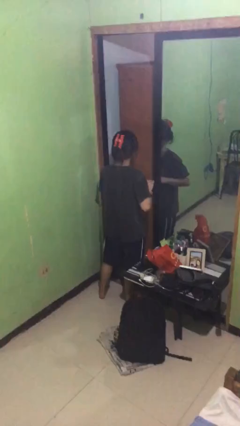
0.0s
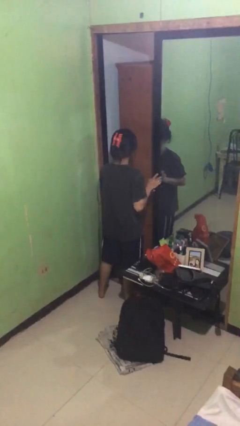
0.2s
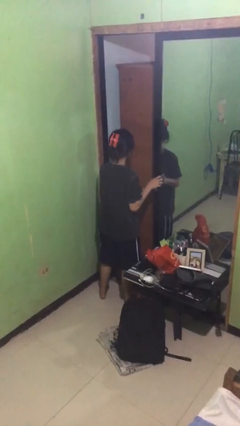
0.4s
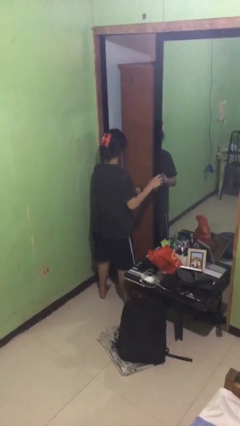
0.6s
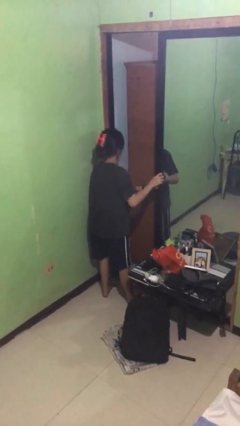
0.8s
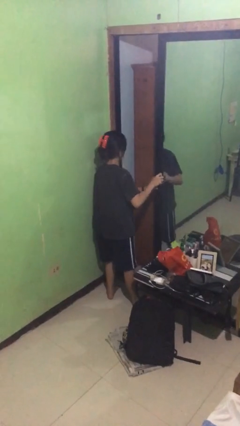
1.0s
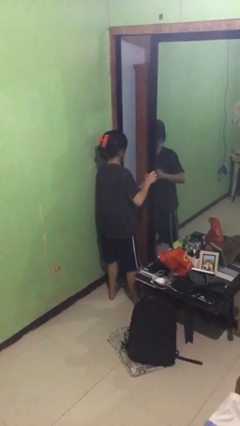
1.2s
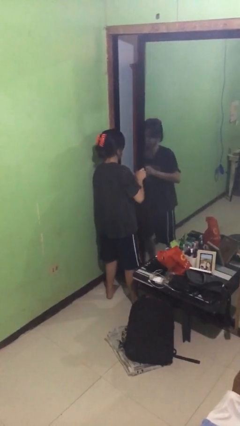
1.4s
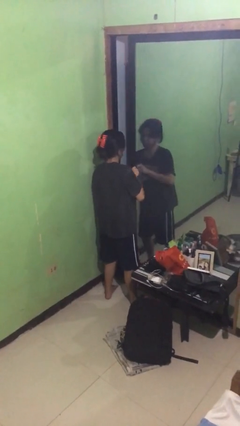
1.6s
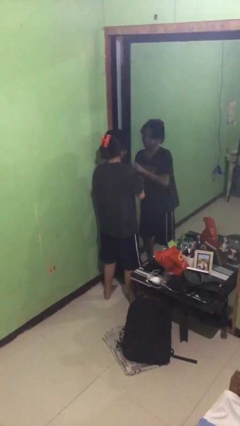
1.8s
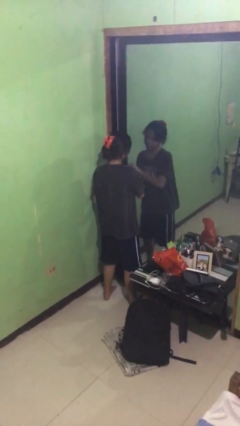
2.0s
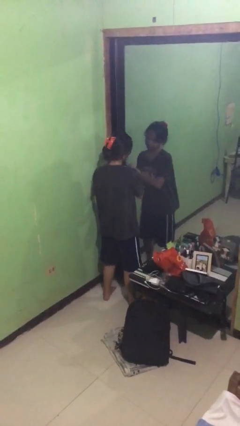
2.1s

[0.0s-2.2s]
person closes sliding door

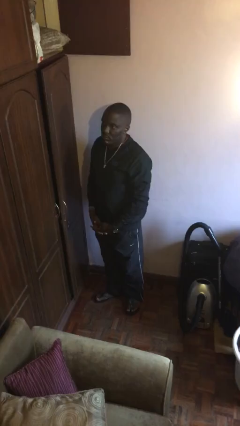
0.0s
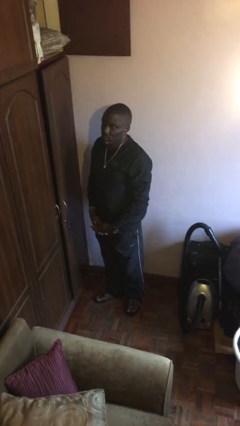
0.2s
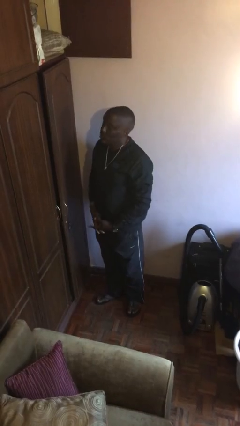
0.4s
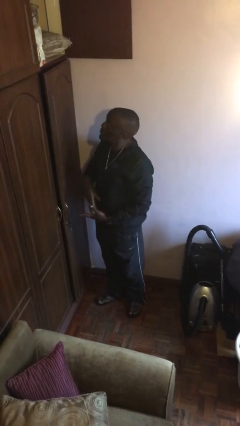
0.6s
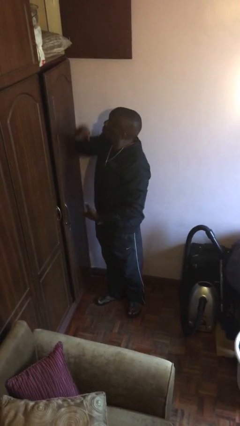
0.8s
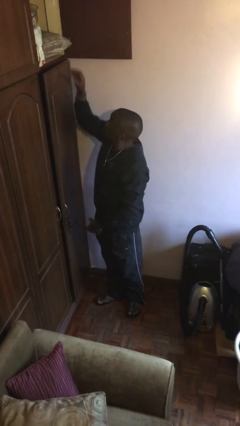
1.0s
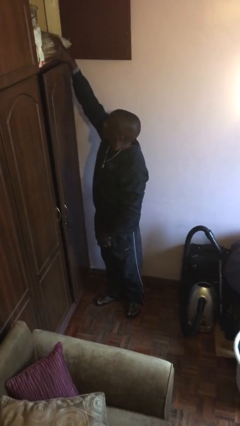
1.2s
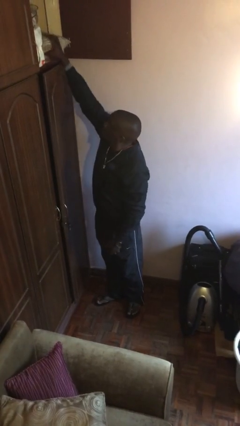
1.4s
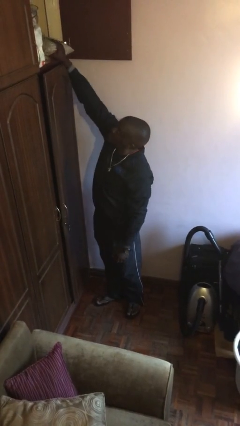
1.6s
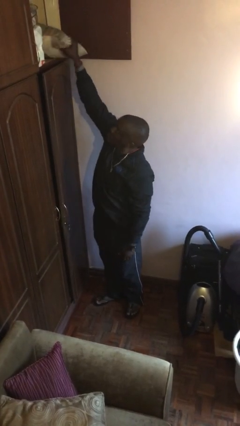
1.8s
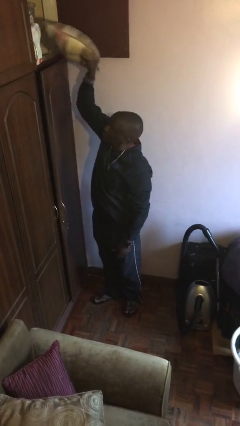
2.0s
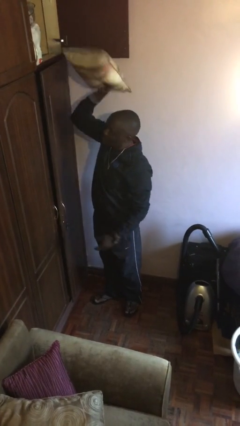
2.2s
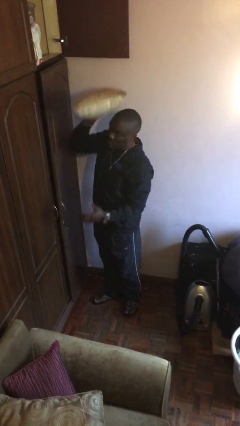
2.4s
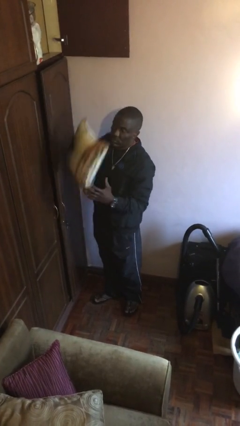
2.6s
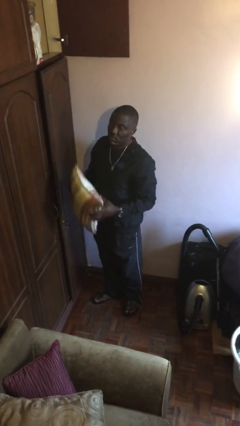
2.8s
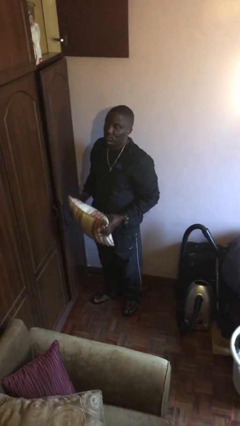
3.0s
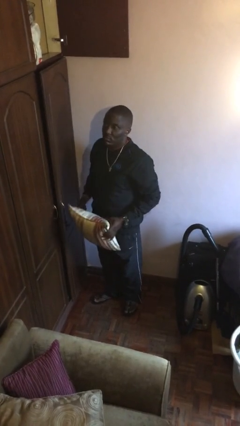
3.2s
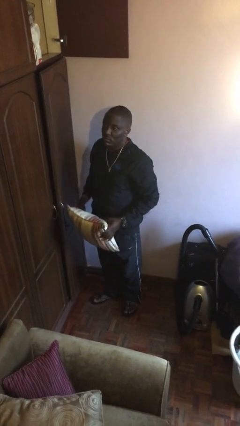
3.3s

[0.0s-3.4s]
person picks up object from shelf

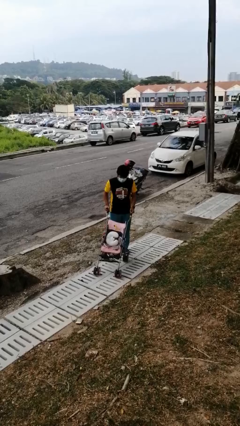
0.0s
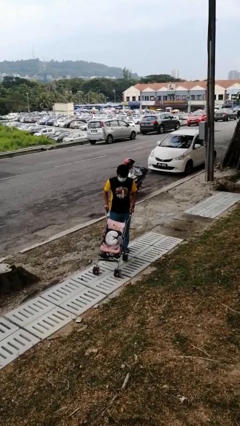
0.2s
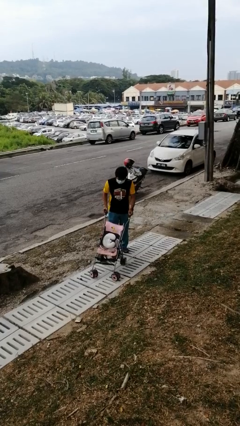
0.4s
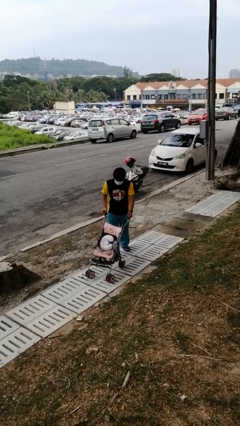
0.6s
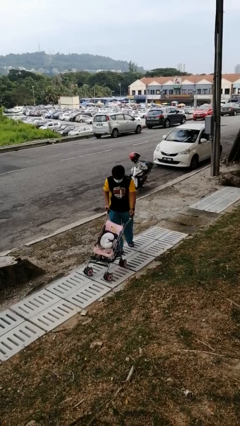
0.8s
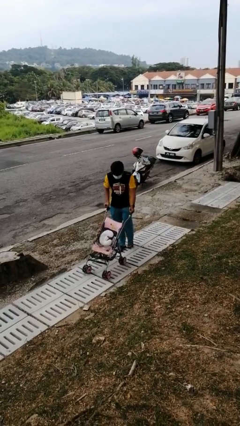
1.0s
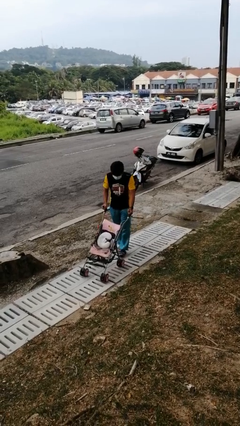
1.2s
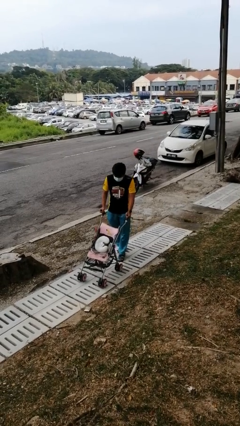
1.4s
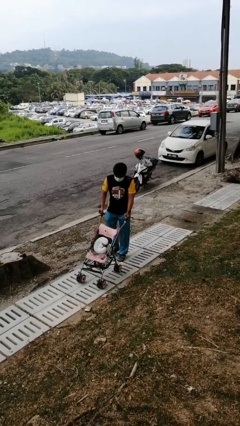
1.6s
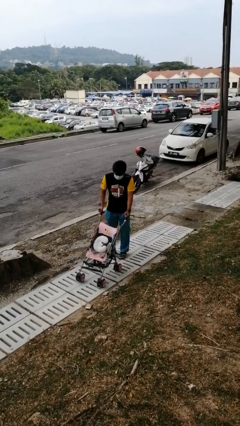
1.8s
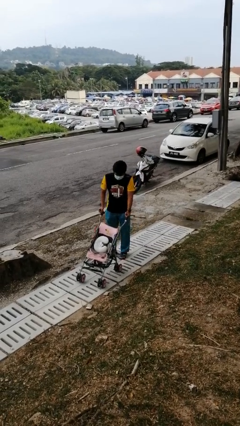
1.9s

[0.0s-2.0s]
person pushes wheeled cart

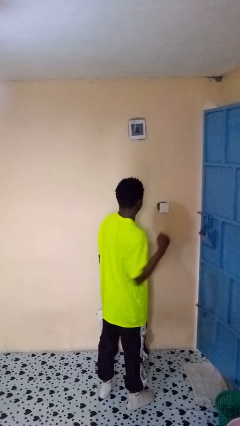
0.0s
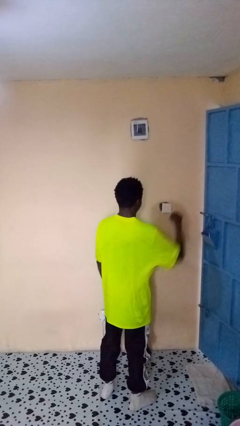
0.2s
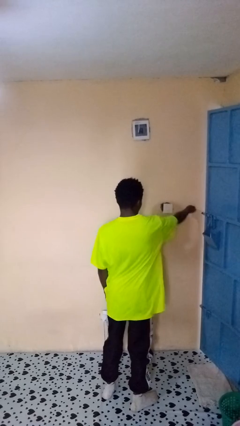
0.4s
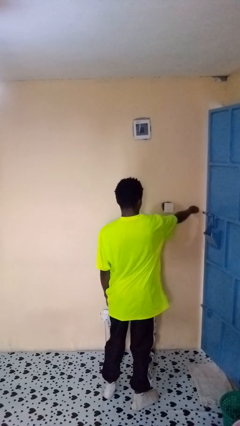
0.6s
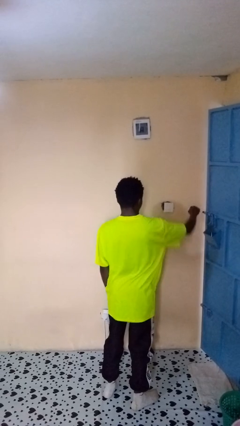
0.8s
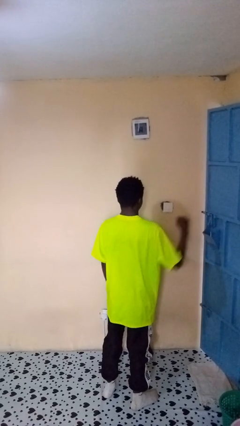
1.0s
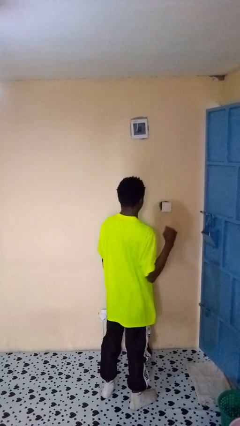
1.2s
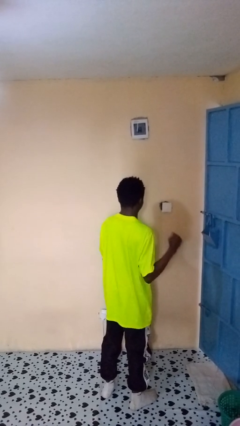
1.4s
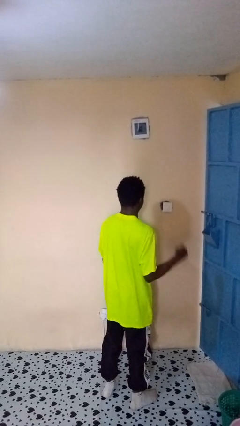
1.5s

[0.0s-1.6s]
person punches

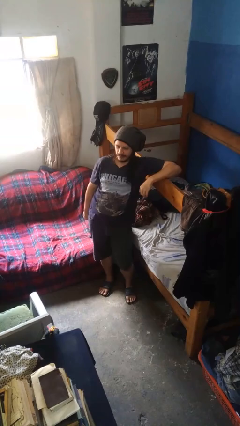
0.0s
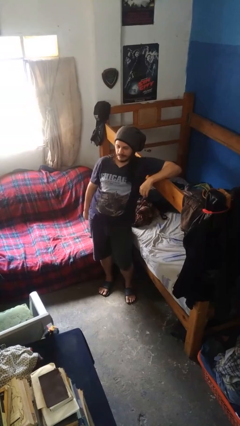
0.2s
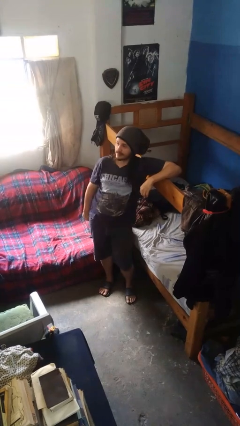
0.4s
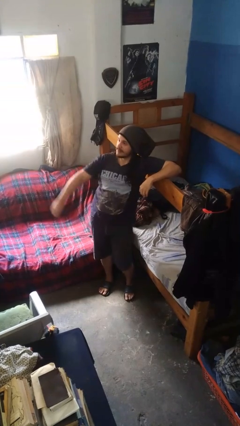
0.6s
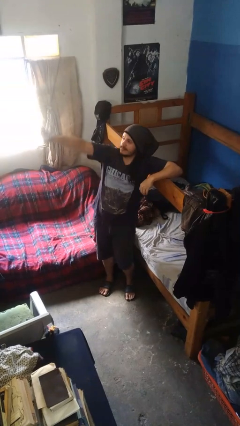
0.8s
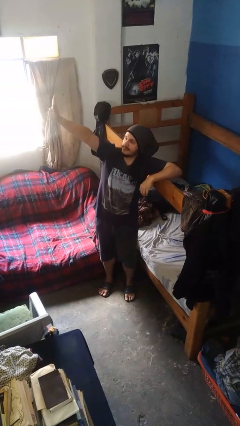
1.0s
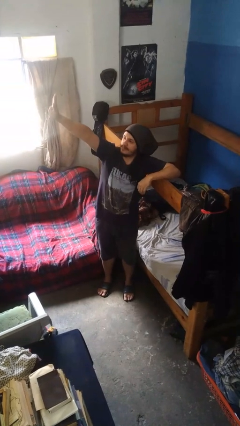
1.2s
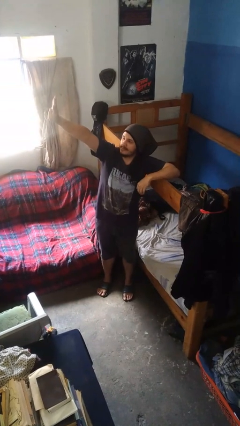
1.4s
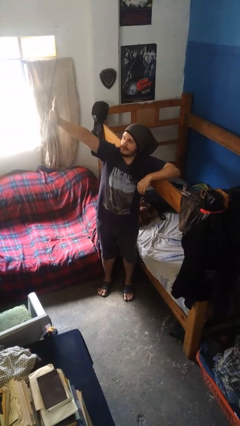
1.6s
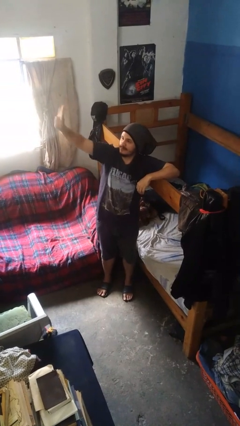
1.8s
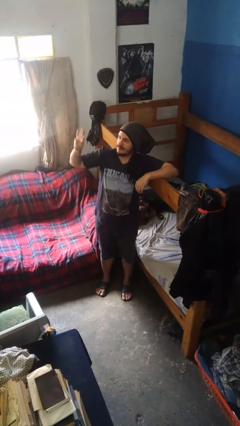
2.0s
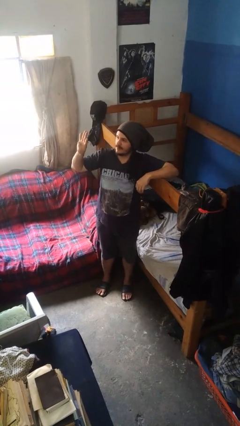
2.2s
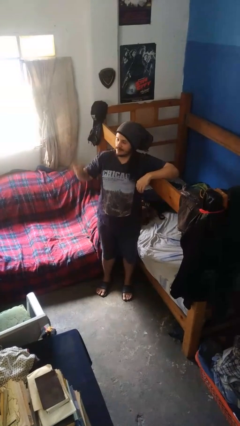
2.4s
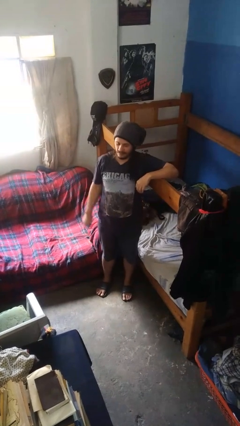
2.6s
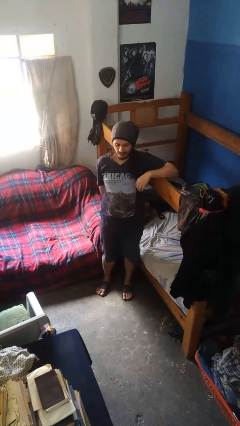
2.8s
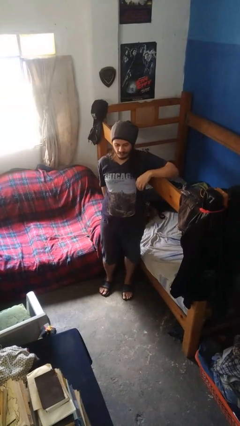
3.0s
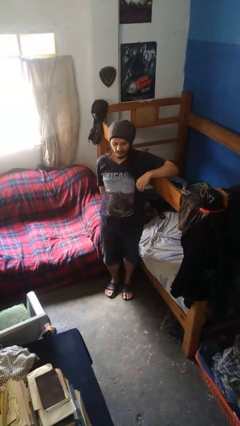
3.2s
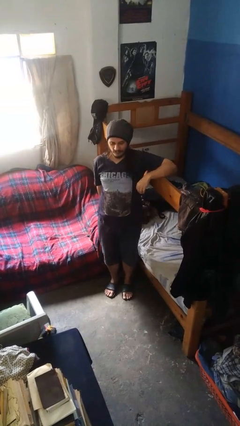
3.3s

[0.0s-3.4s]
person gestures number four

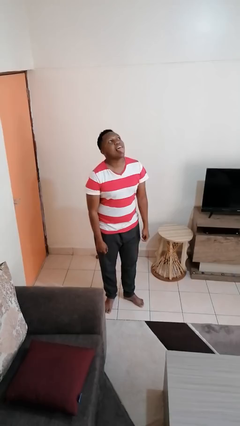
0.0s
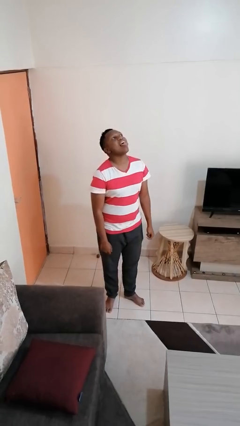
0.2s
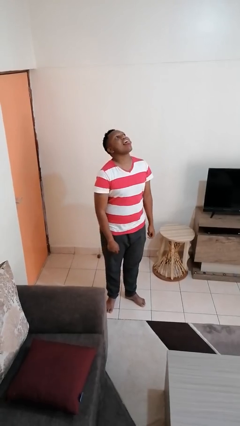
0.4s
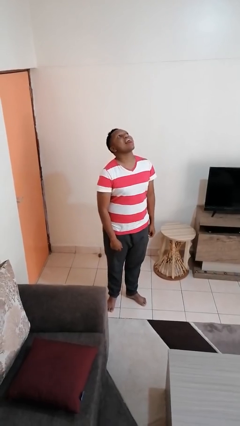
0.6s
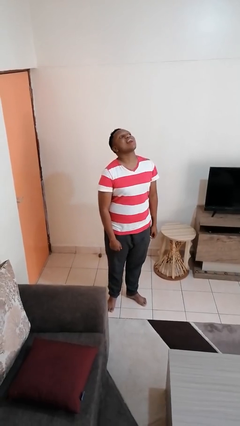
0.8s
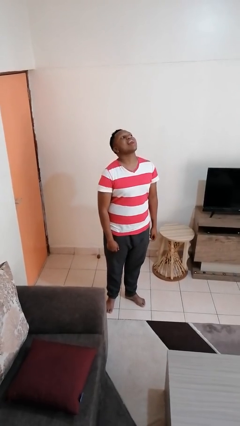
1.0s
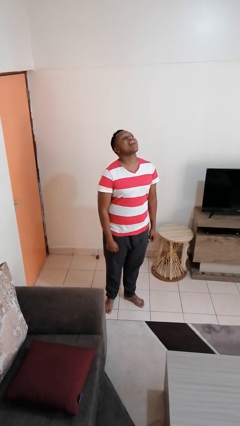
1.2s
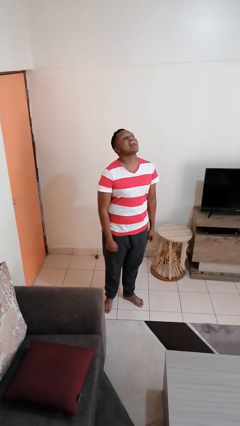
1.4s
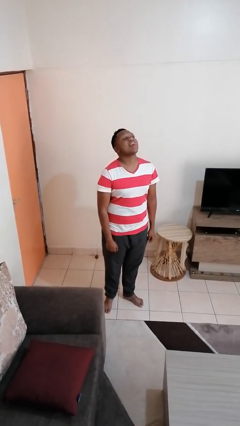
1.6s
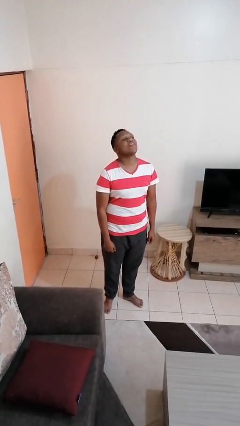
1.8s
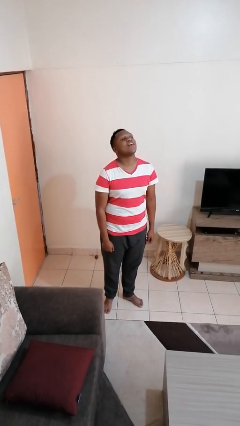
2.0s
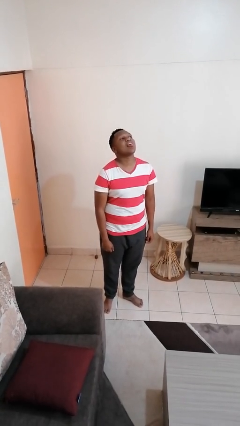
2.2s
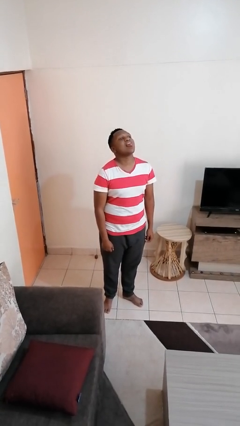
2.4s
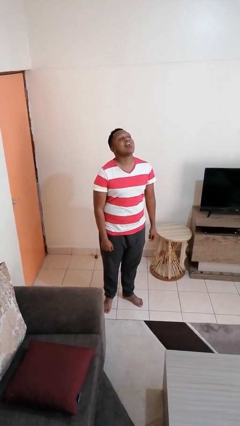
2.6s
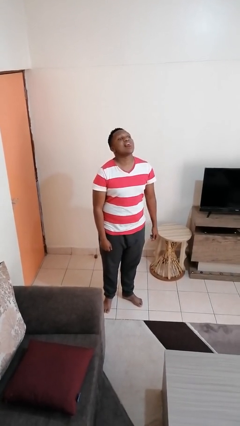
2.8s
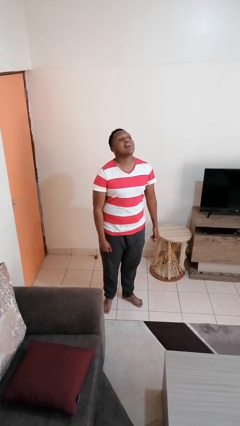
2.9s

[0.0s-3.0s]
person sticks out tongue

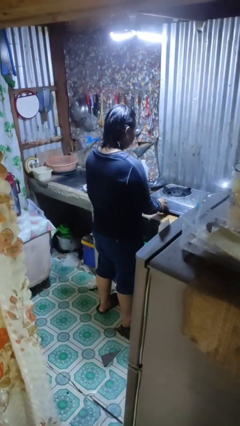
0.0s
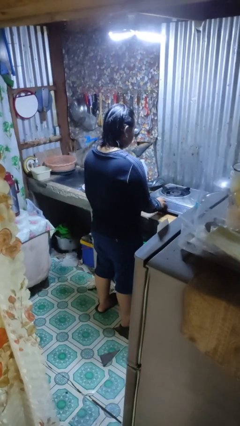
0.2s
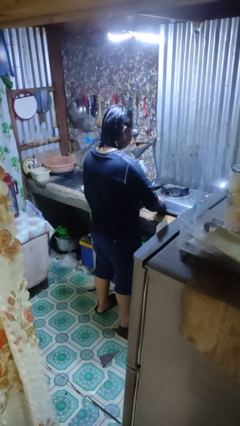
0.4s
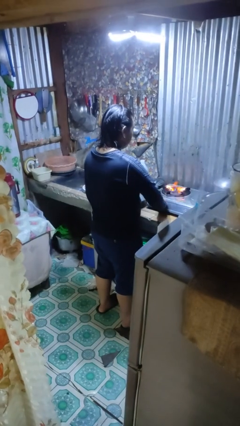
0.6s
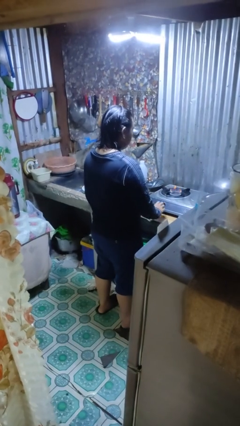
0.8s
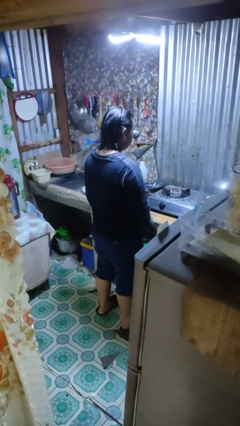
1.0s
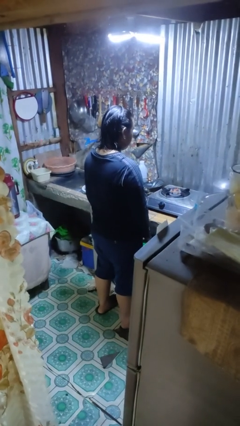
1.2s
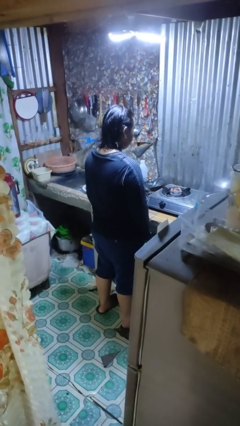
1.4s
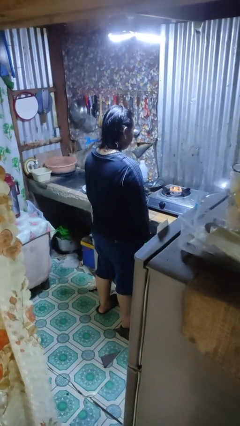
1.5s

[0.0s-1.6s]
person turns on stovetop
